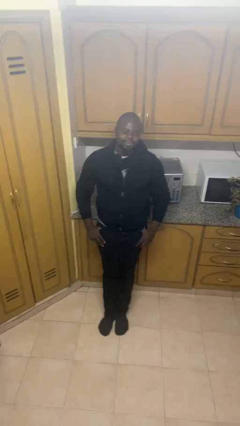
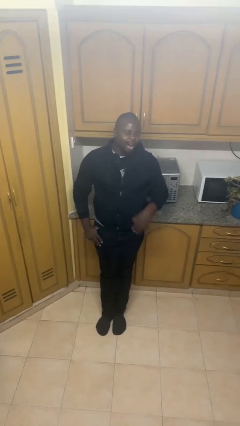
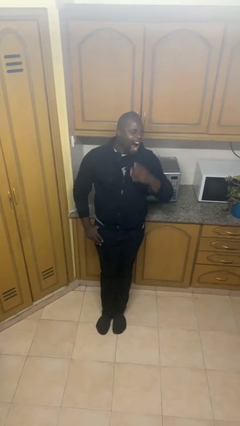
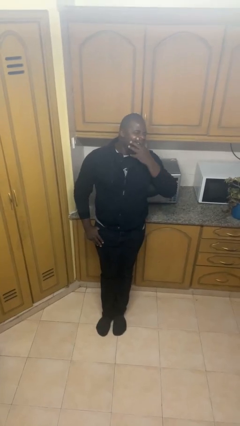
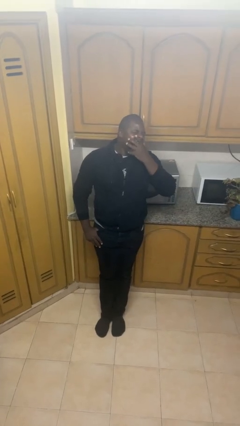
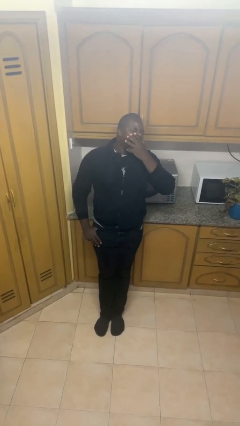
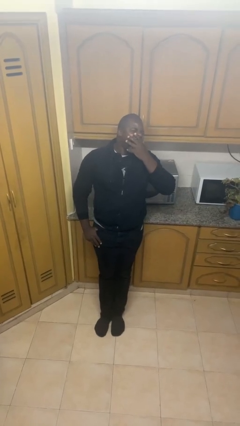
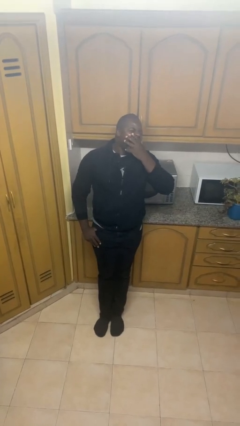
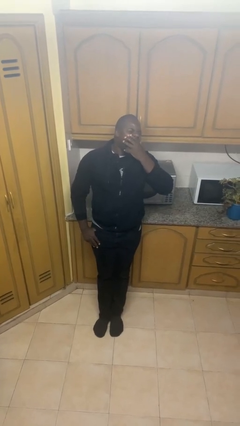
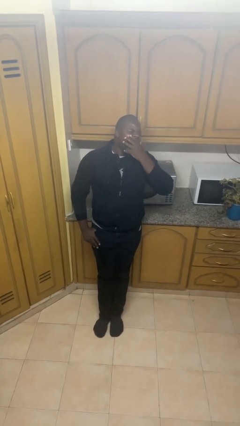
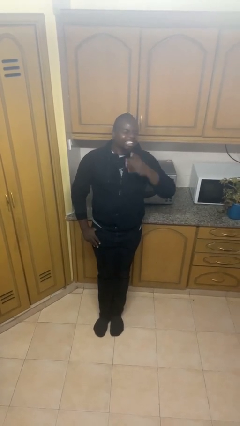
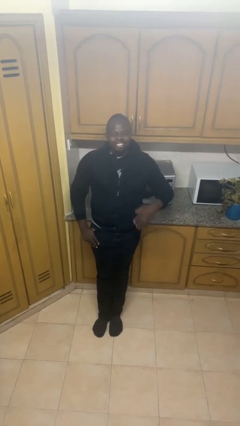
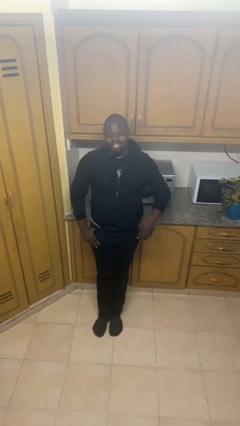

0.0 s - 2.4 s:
person yawns

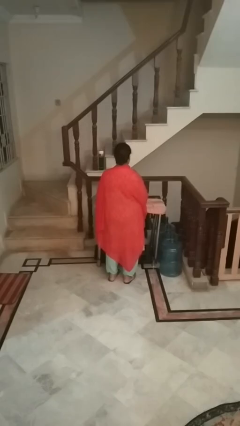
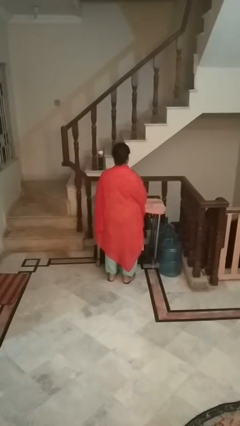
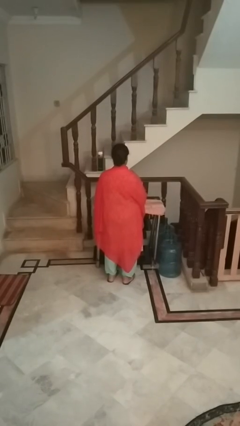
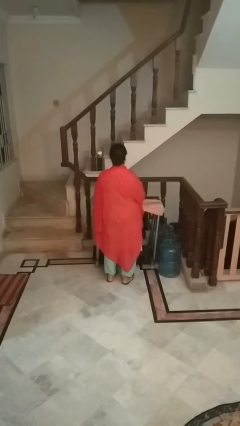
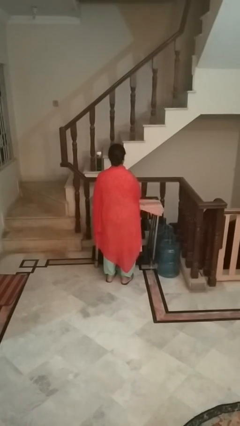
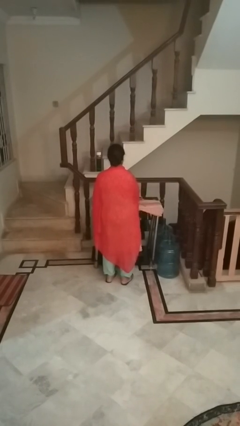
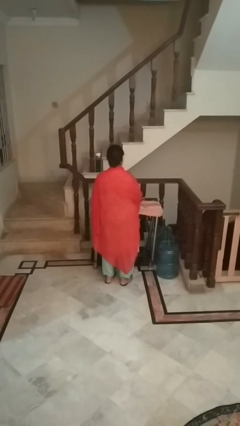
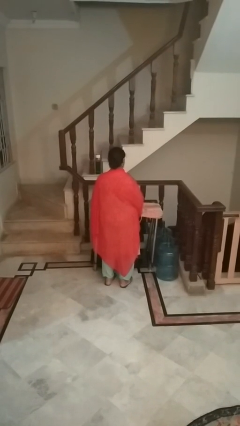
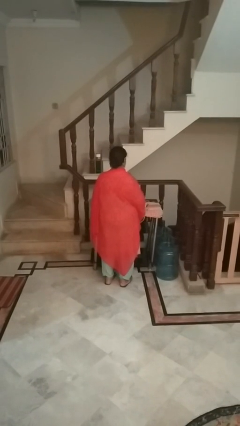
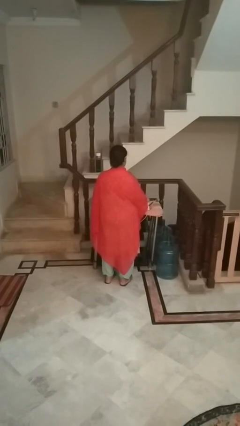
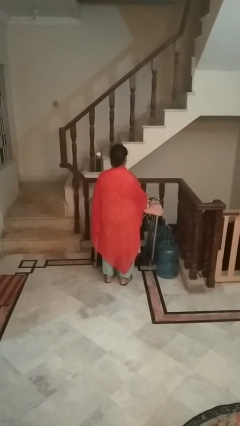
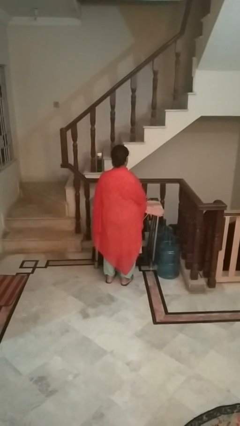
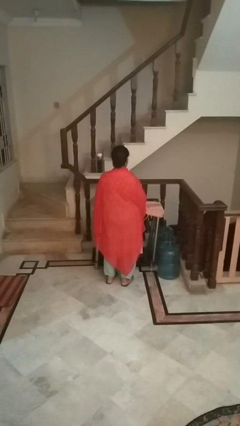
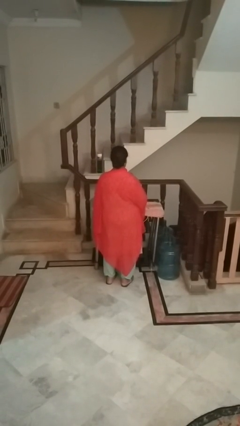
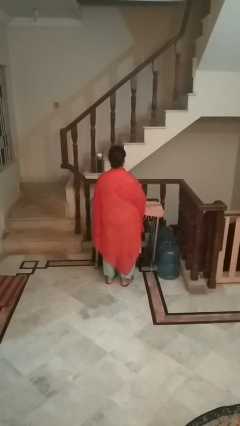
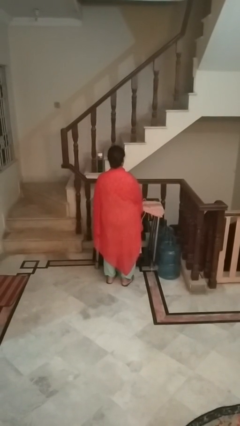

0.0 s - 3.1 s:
person irons clothes

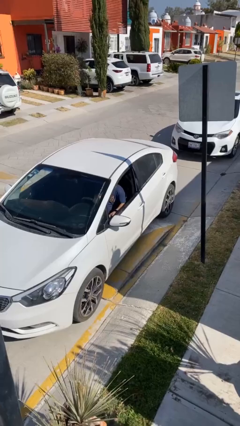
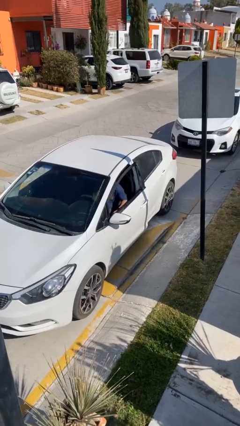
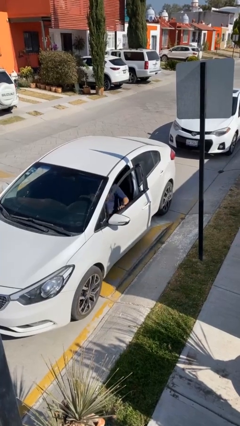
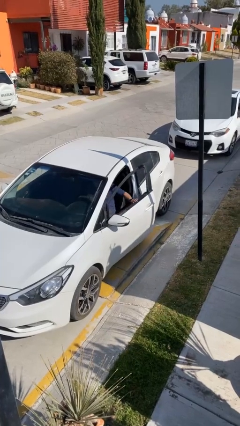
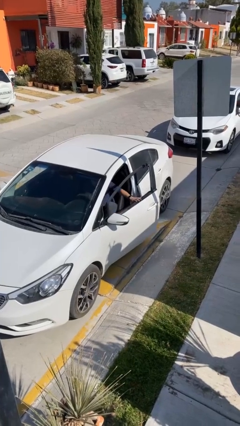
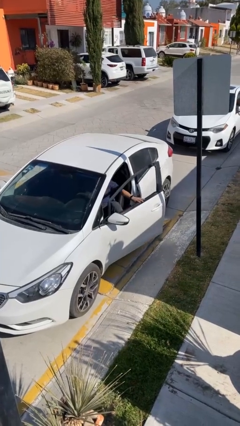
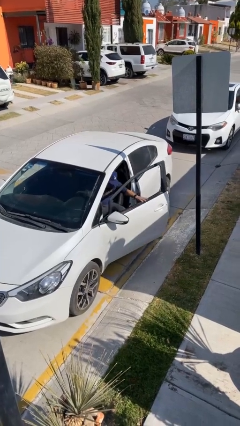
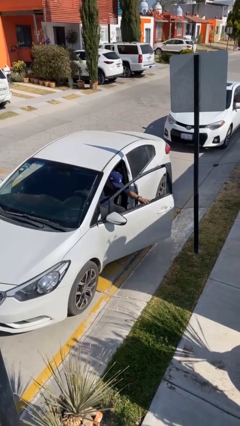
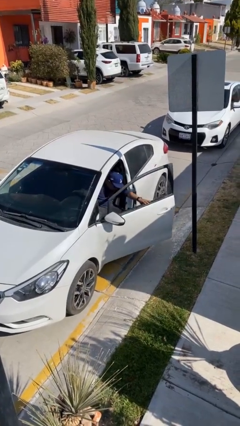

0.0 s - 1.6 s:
person opens car door

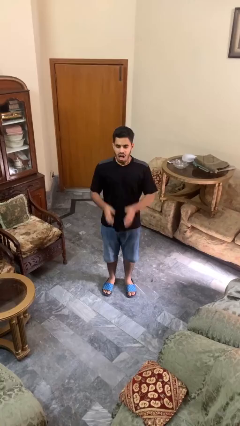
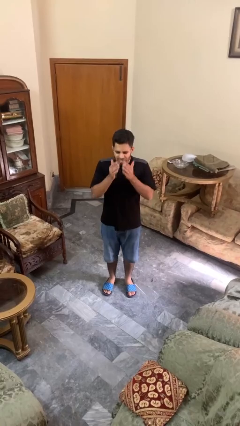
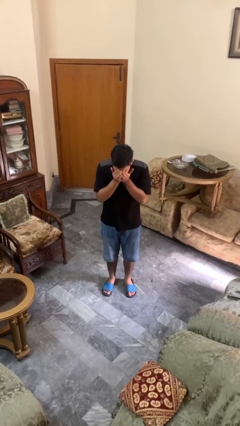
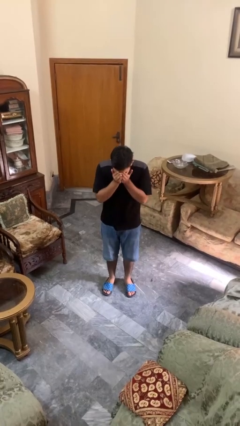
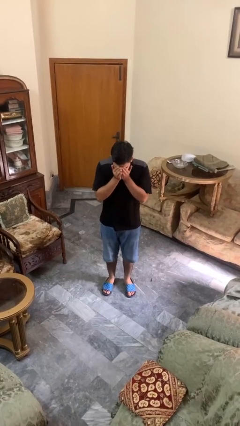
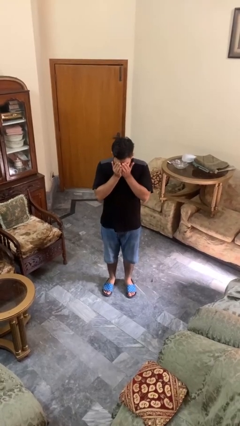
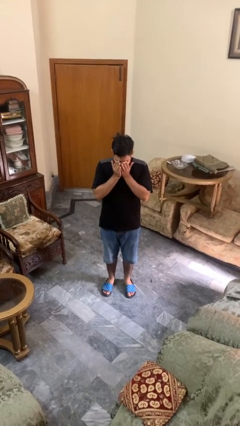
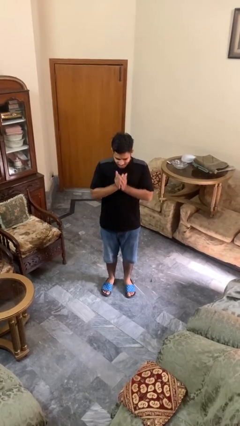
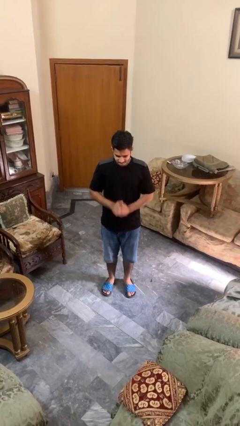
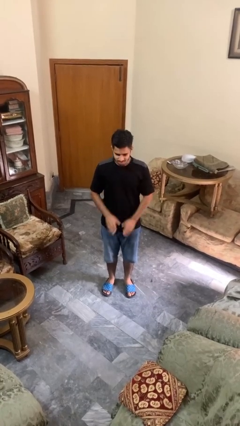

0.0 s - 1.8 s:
person sneezes into hand

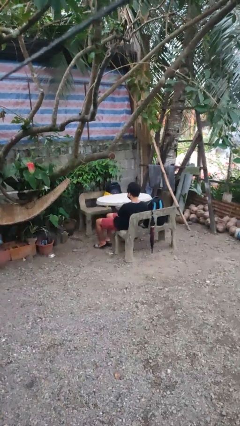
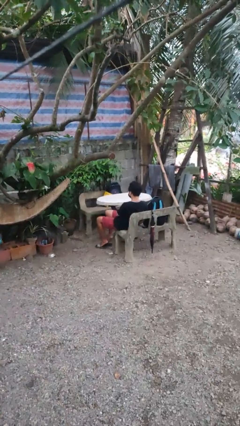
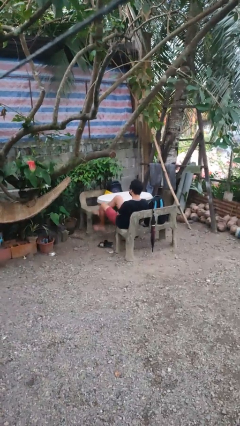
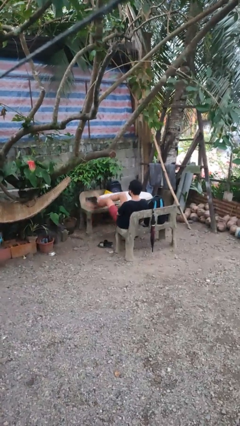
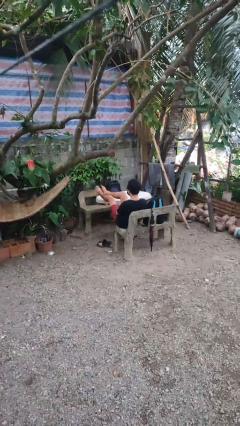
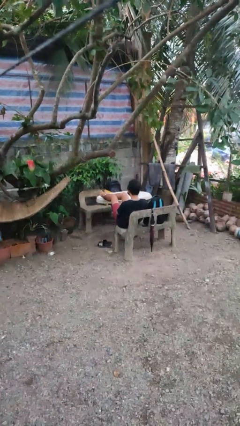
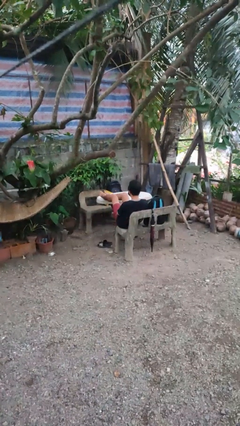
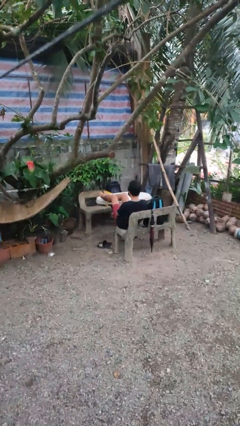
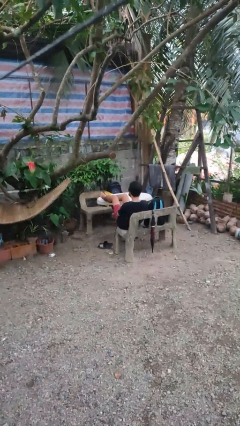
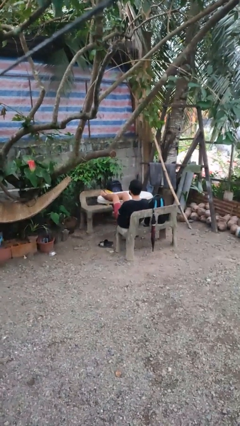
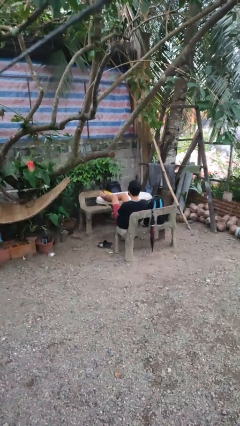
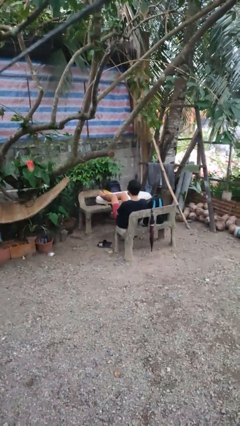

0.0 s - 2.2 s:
person puts feet up

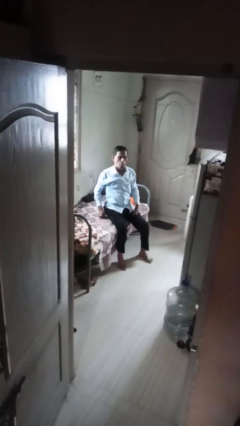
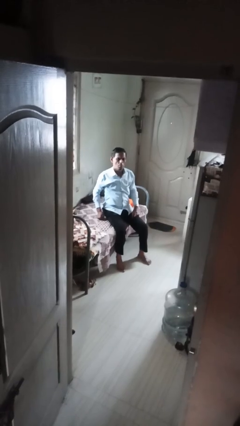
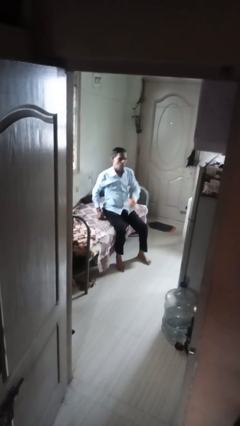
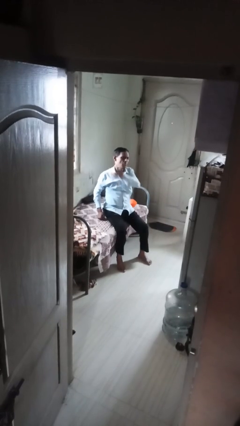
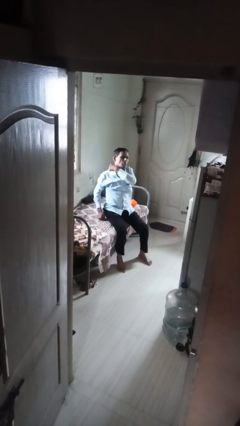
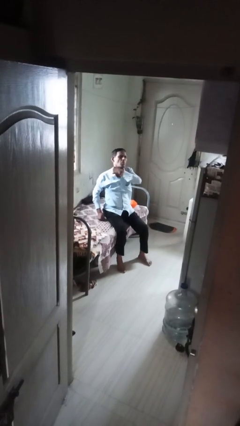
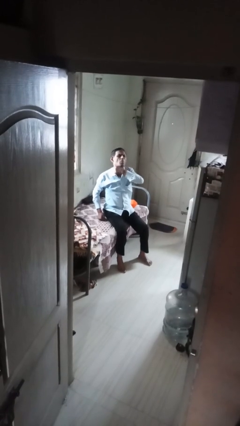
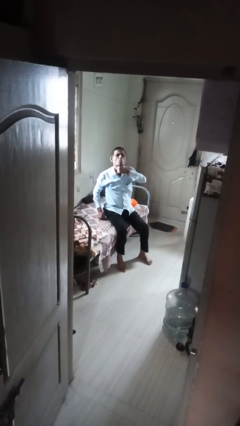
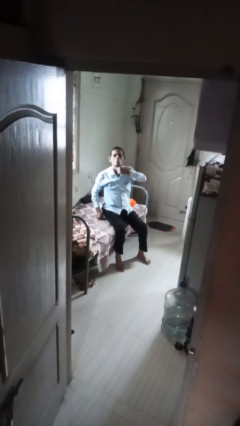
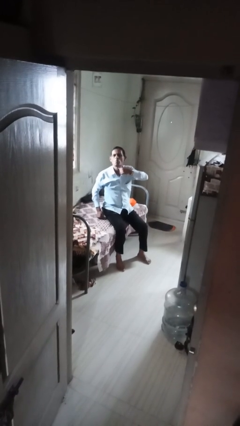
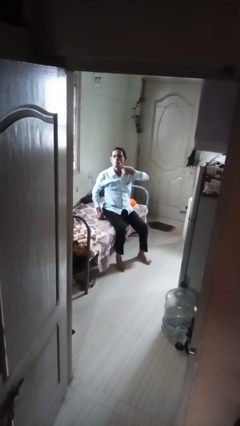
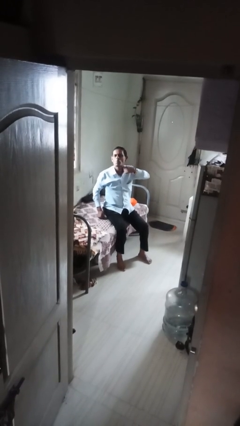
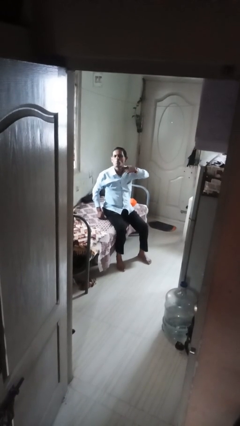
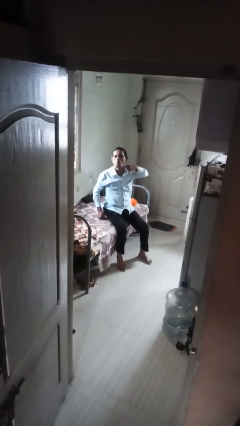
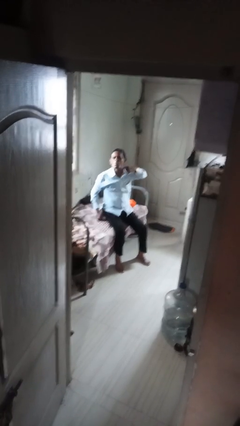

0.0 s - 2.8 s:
person gestures cut

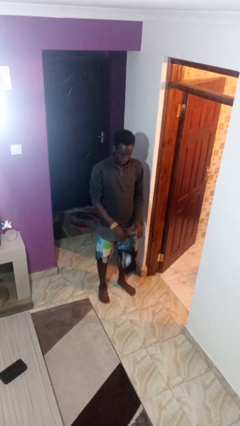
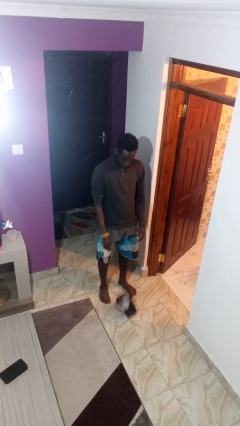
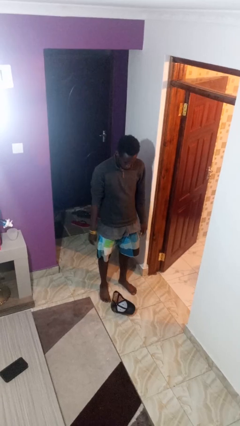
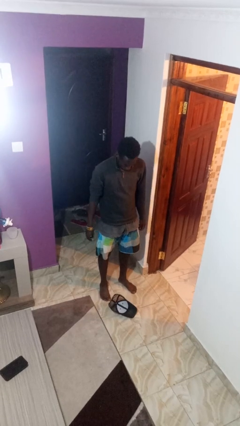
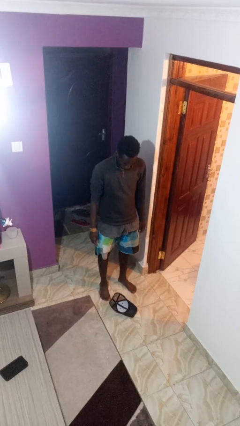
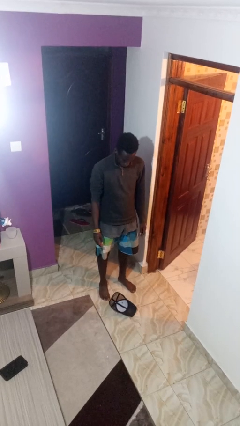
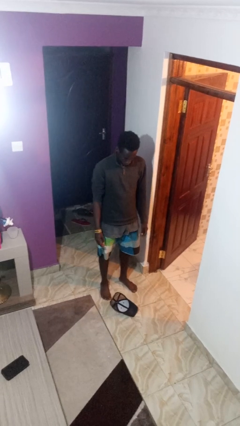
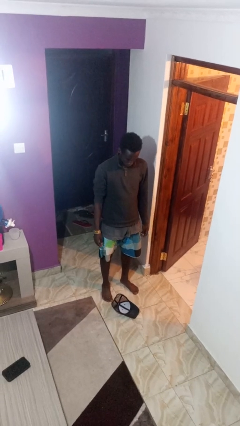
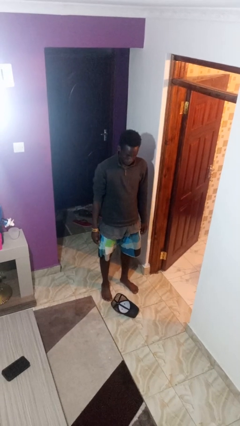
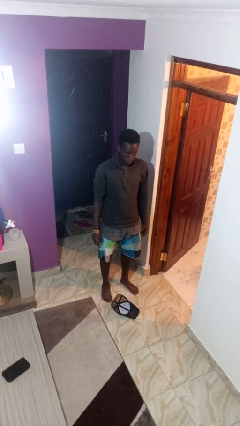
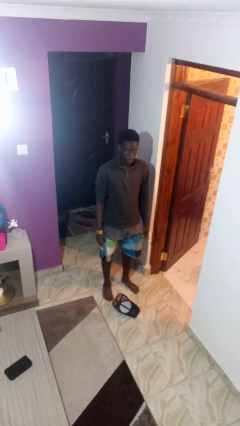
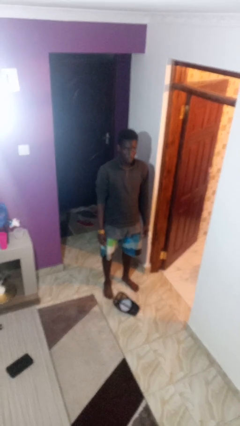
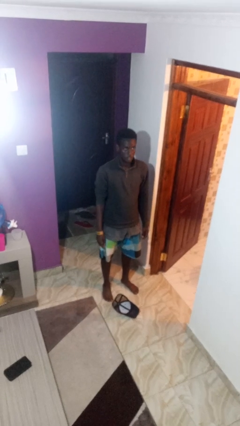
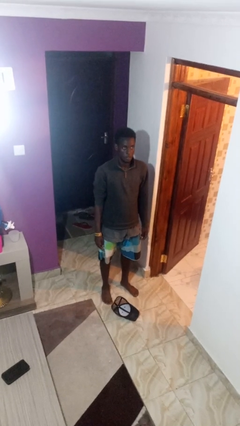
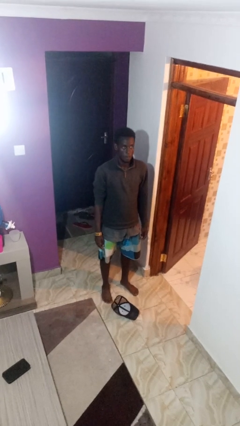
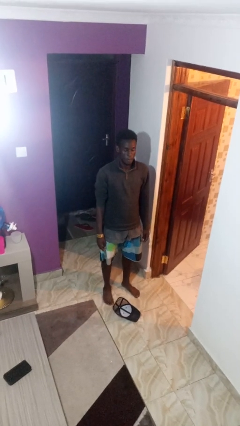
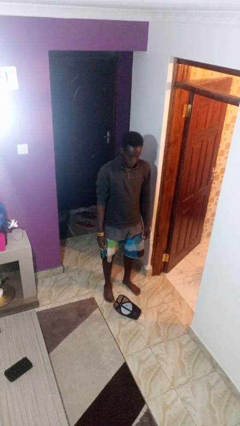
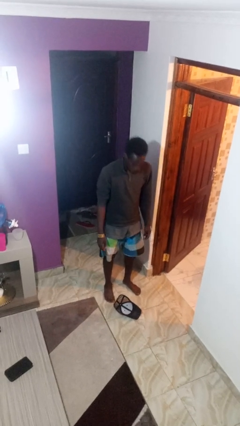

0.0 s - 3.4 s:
person drops object
